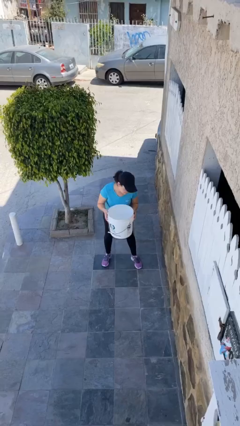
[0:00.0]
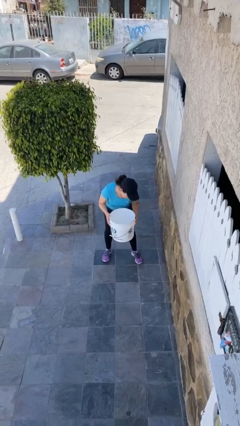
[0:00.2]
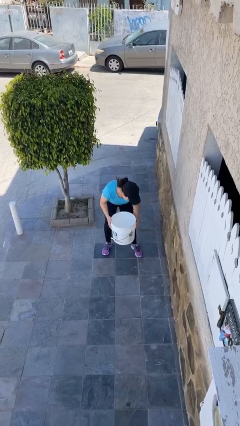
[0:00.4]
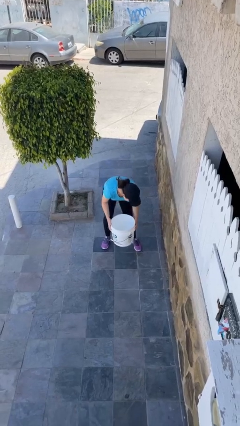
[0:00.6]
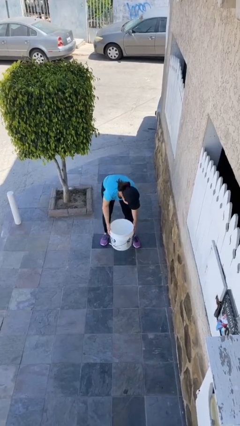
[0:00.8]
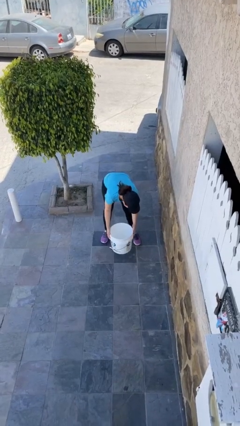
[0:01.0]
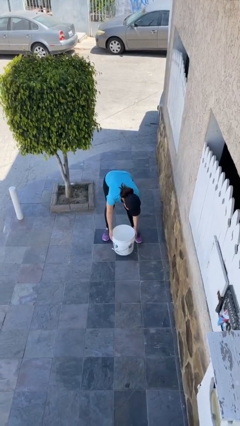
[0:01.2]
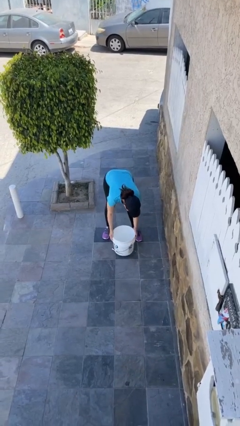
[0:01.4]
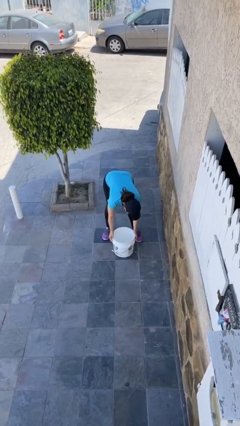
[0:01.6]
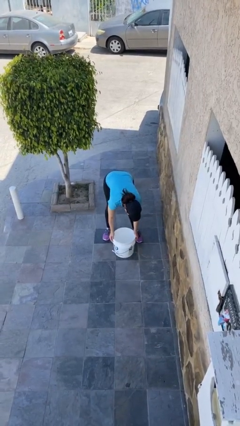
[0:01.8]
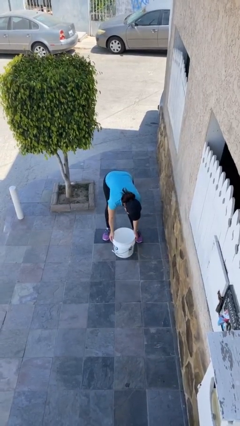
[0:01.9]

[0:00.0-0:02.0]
person puts down object on floor

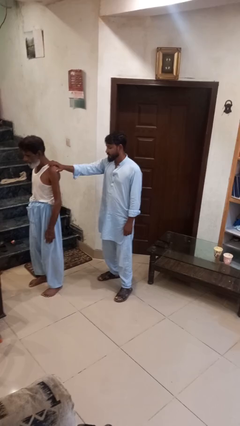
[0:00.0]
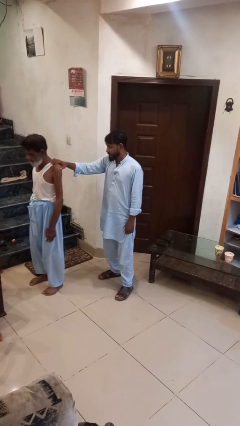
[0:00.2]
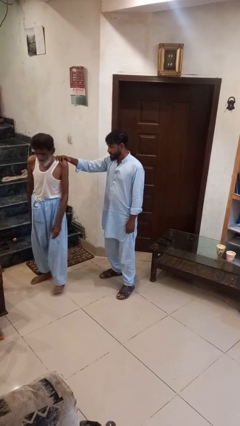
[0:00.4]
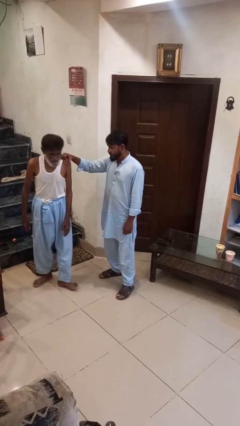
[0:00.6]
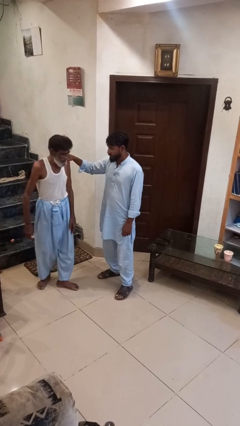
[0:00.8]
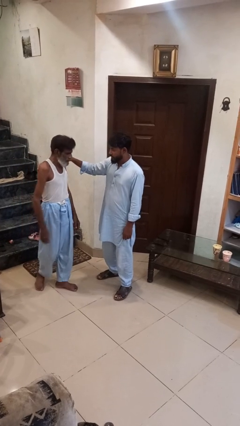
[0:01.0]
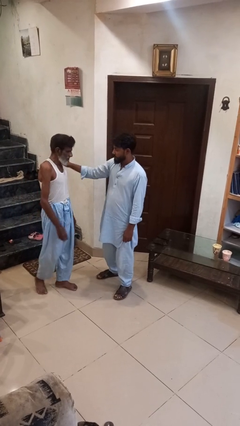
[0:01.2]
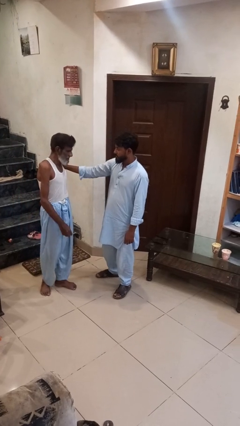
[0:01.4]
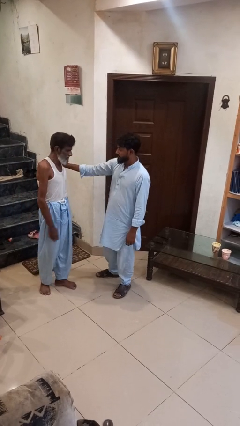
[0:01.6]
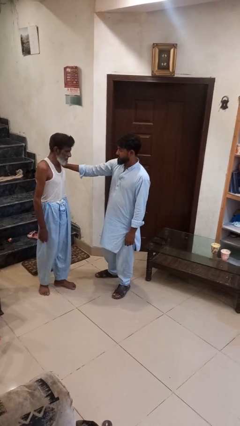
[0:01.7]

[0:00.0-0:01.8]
person spins person around

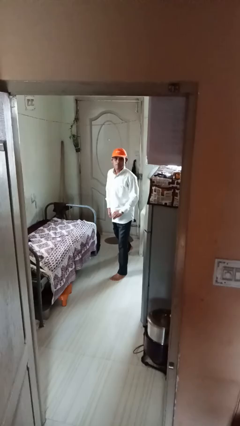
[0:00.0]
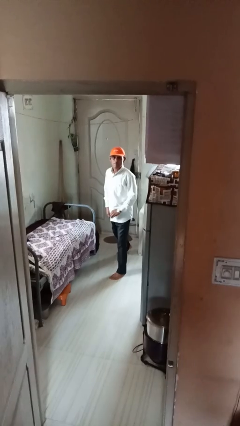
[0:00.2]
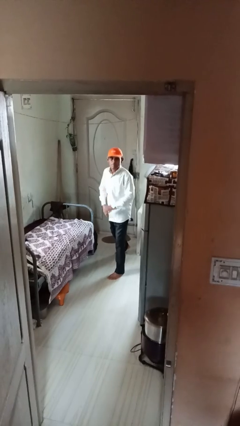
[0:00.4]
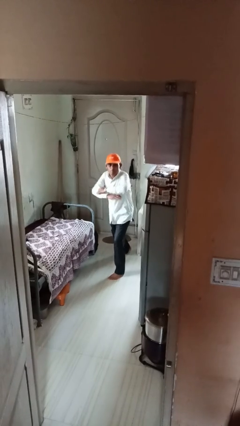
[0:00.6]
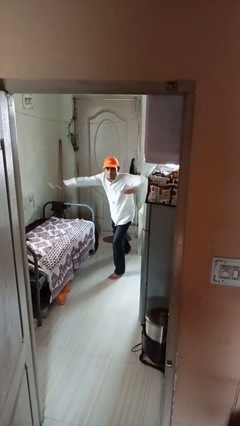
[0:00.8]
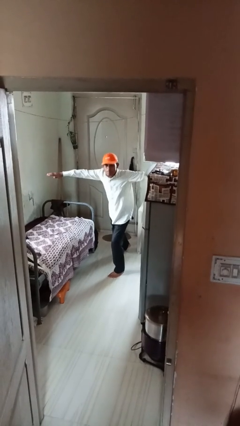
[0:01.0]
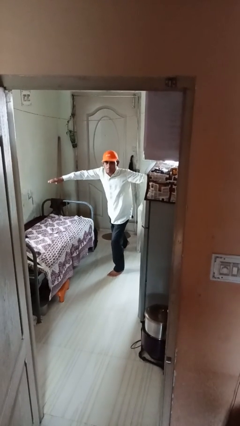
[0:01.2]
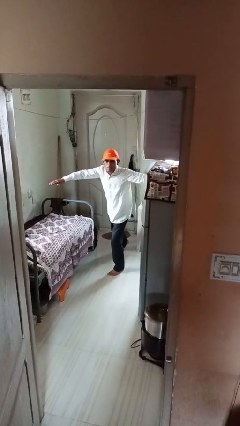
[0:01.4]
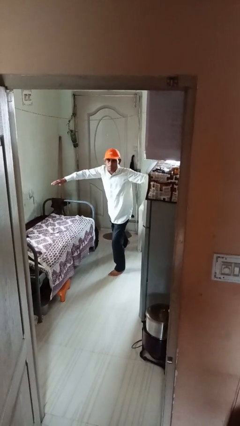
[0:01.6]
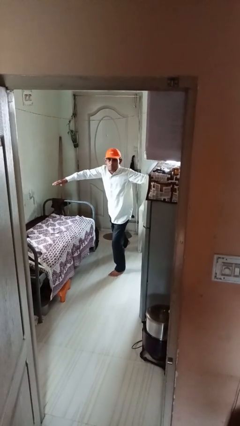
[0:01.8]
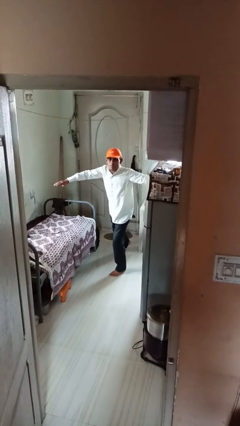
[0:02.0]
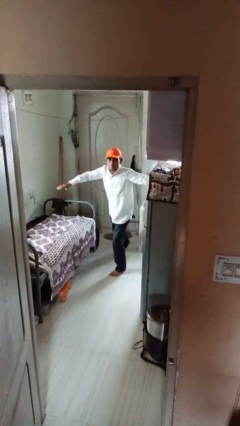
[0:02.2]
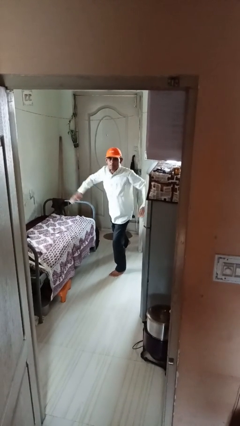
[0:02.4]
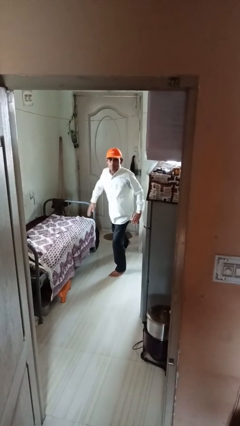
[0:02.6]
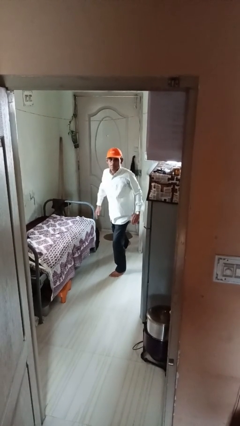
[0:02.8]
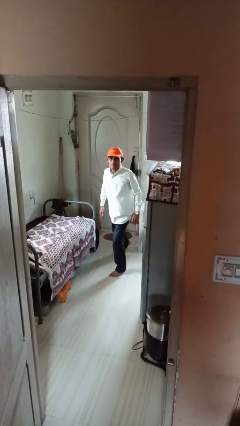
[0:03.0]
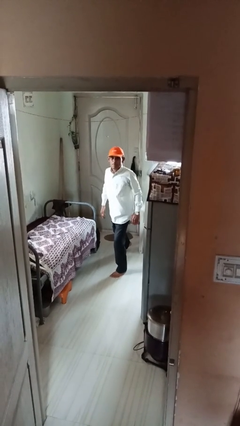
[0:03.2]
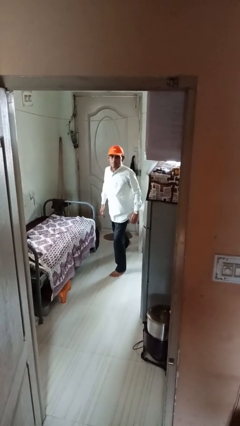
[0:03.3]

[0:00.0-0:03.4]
person karate chop

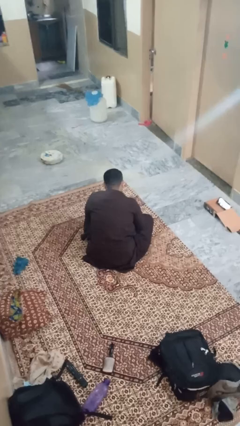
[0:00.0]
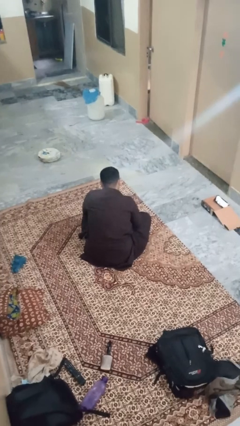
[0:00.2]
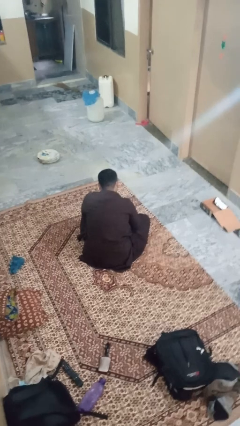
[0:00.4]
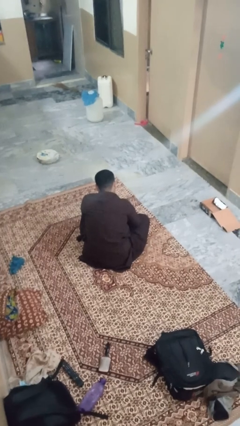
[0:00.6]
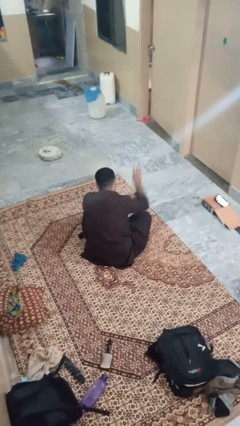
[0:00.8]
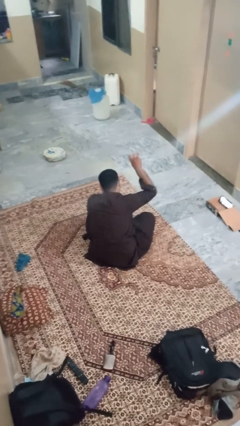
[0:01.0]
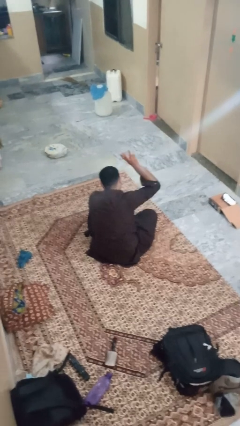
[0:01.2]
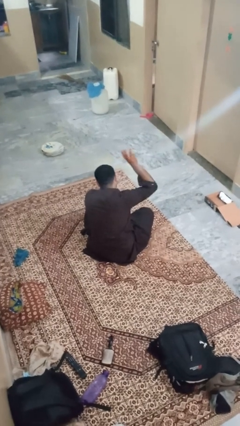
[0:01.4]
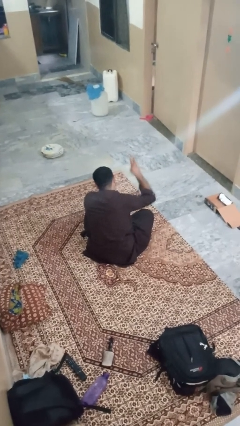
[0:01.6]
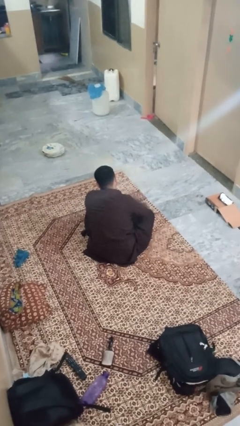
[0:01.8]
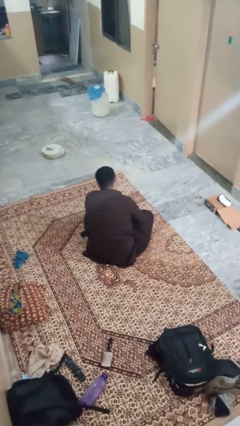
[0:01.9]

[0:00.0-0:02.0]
person gestures number three

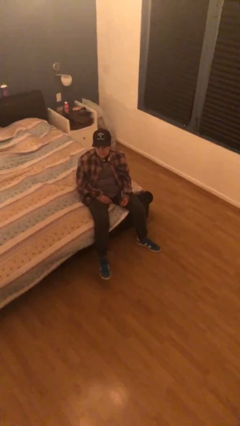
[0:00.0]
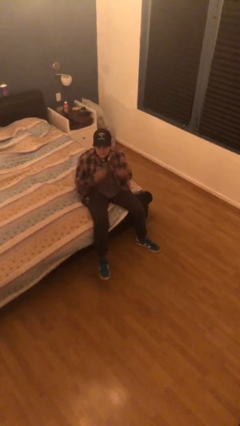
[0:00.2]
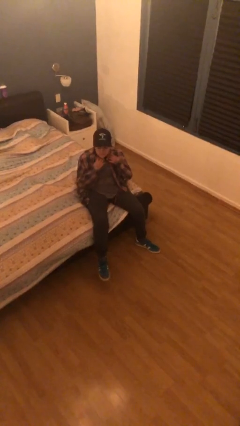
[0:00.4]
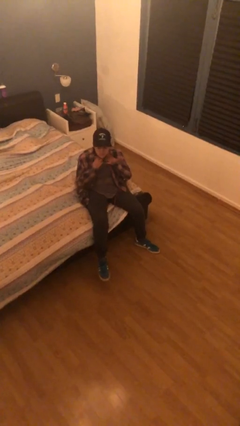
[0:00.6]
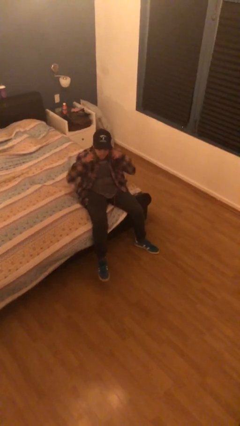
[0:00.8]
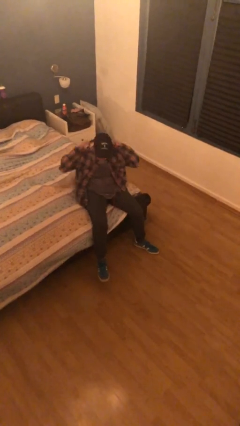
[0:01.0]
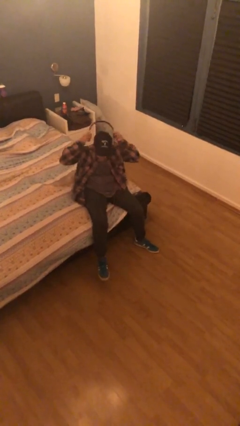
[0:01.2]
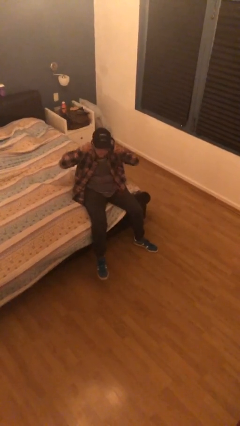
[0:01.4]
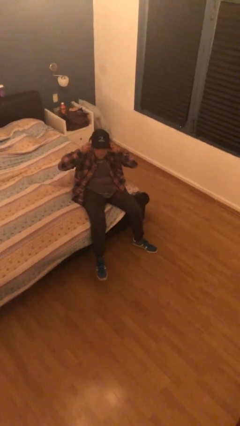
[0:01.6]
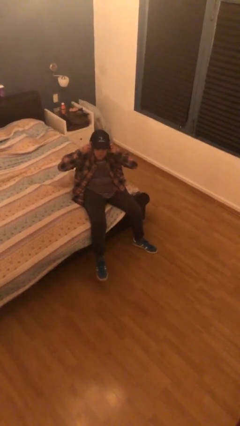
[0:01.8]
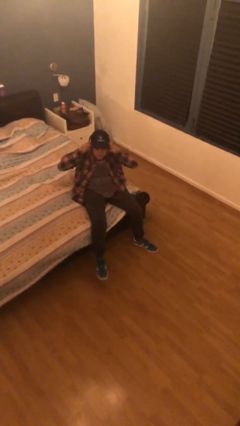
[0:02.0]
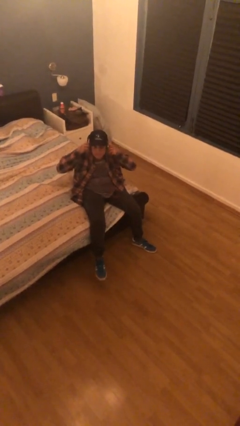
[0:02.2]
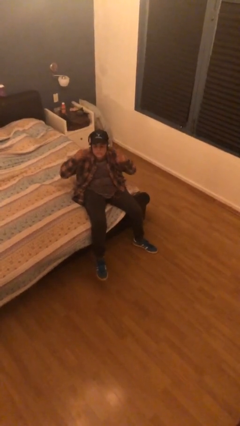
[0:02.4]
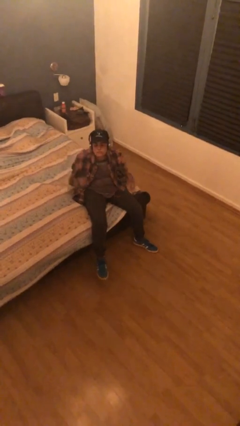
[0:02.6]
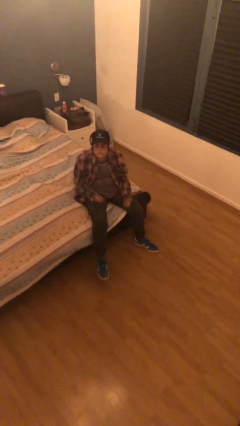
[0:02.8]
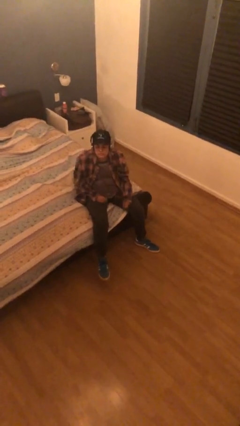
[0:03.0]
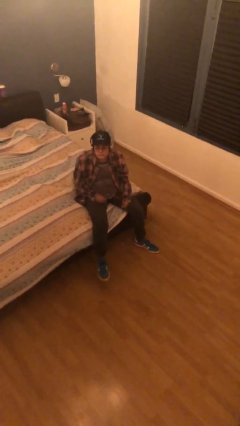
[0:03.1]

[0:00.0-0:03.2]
person puts on headphones

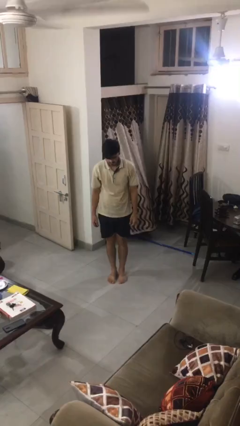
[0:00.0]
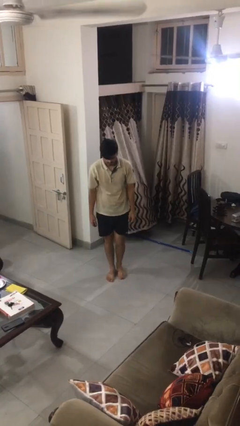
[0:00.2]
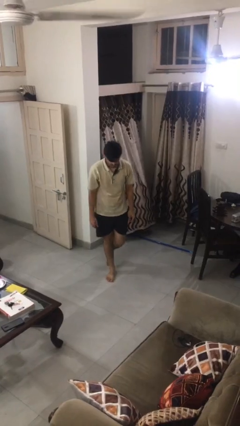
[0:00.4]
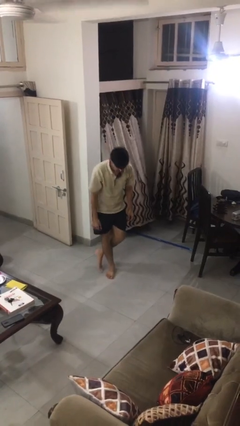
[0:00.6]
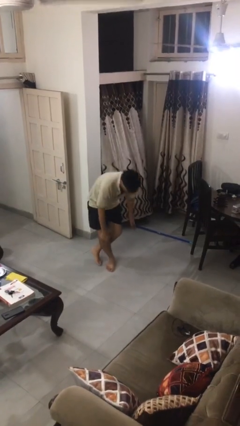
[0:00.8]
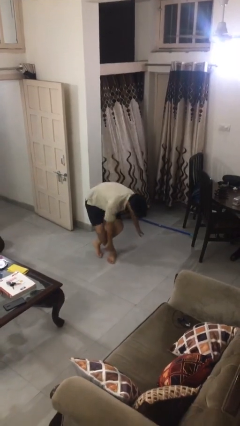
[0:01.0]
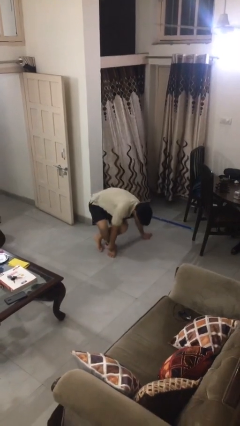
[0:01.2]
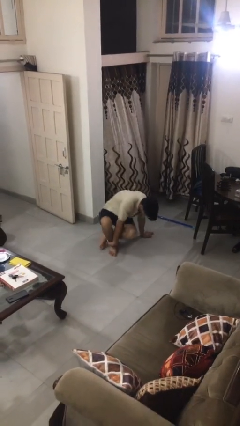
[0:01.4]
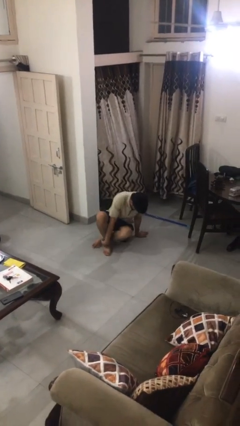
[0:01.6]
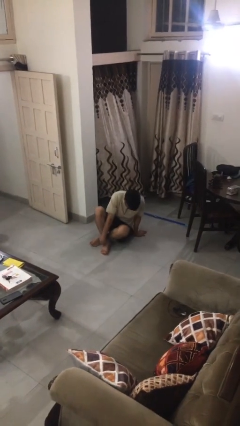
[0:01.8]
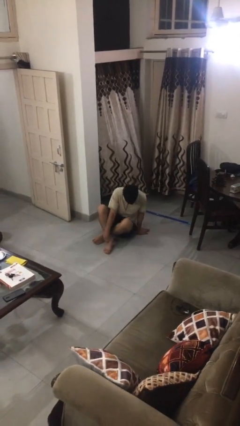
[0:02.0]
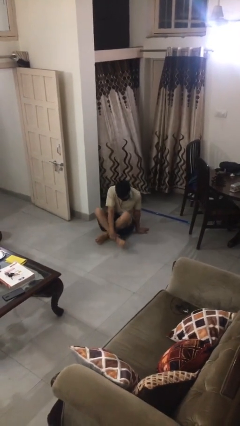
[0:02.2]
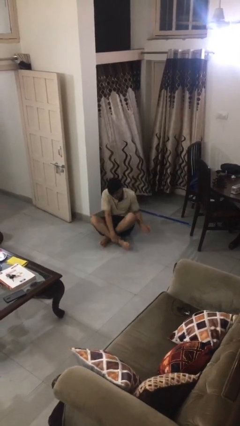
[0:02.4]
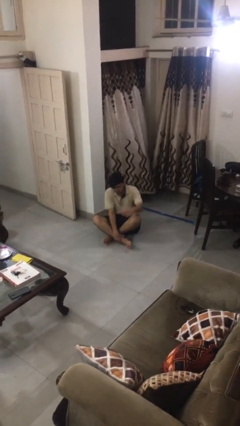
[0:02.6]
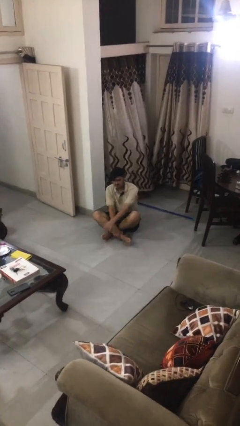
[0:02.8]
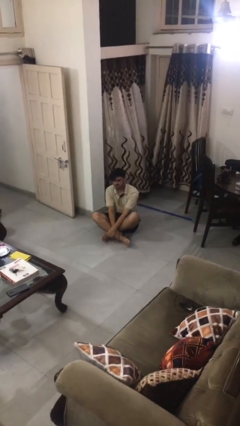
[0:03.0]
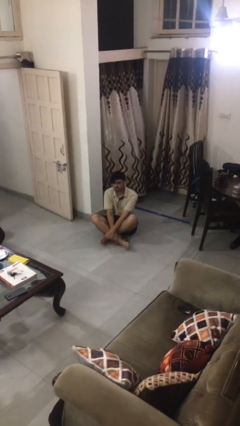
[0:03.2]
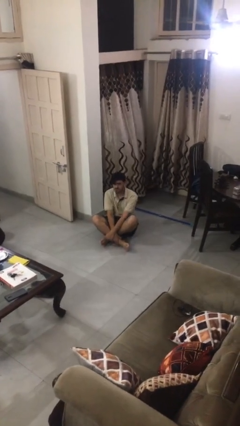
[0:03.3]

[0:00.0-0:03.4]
person sits crisscross

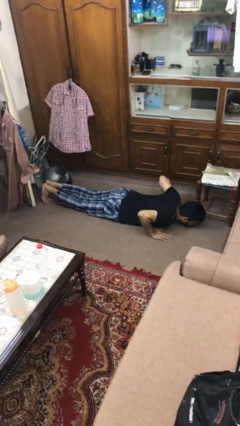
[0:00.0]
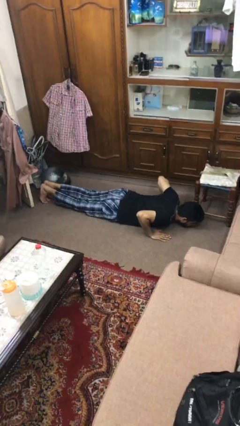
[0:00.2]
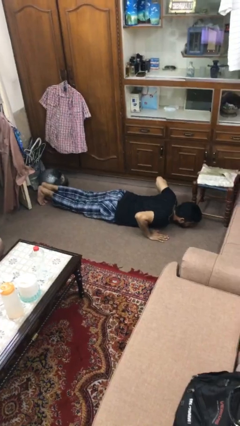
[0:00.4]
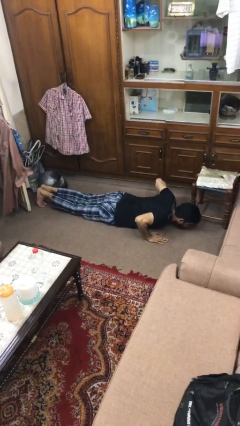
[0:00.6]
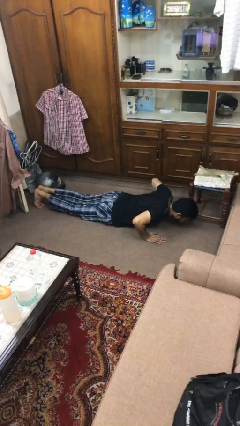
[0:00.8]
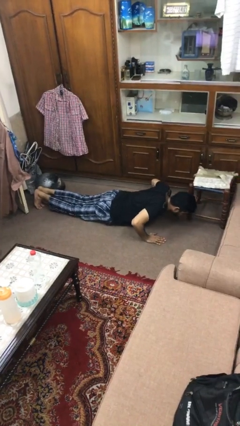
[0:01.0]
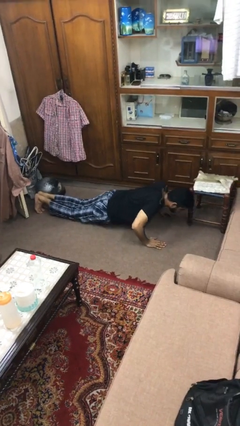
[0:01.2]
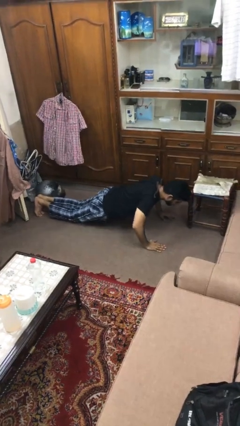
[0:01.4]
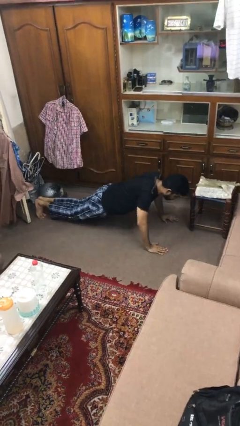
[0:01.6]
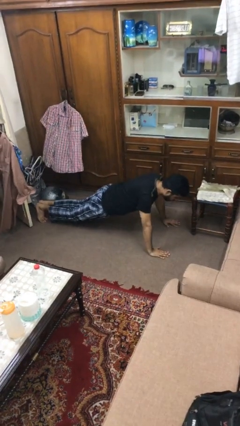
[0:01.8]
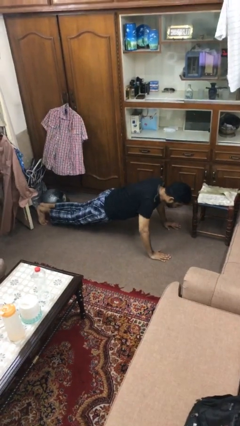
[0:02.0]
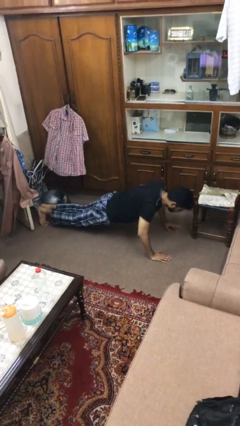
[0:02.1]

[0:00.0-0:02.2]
person exercises with pushup
